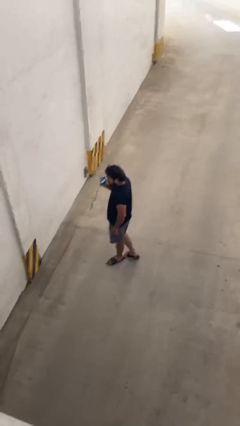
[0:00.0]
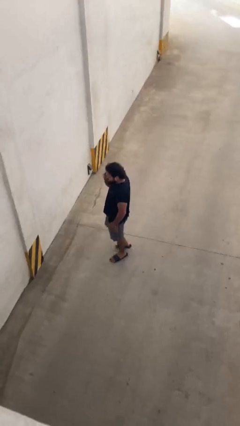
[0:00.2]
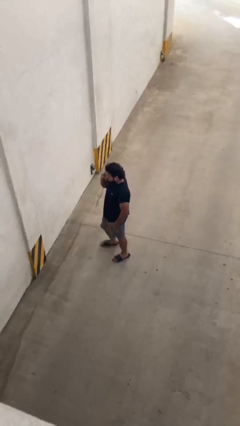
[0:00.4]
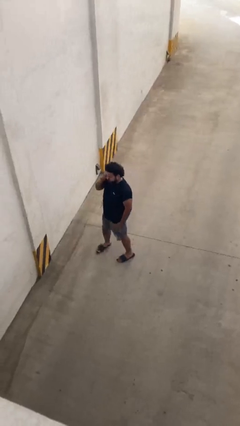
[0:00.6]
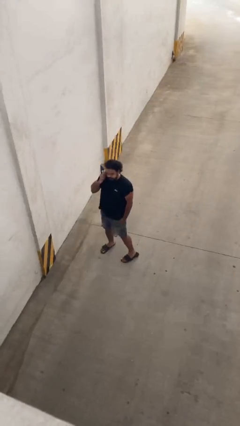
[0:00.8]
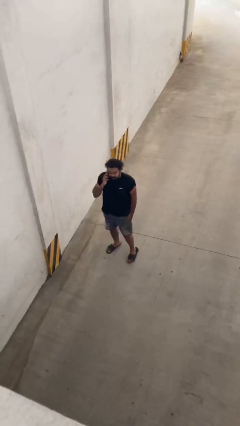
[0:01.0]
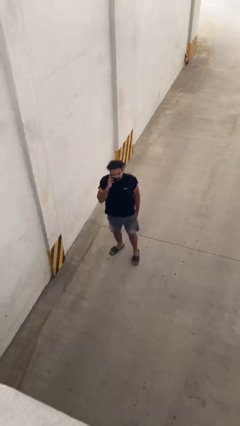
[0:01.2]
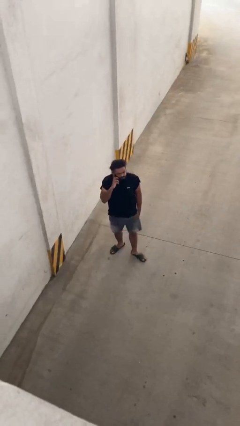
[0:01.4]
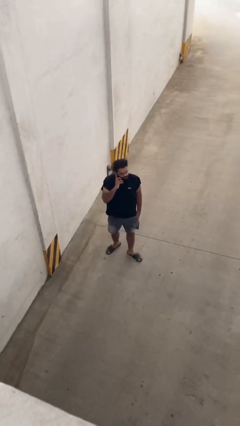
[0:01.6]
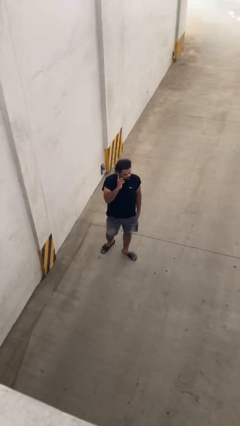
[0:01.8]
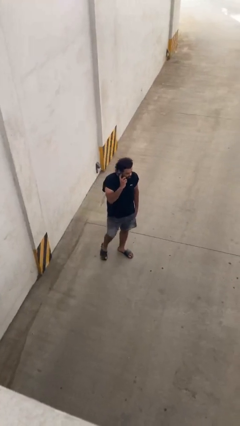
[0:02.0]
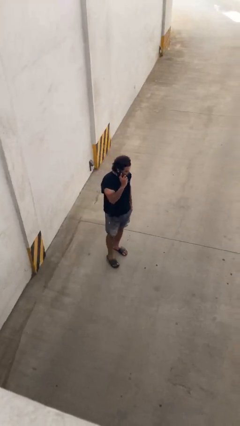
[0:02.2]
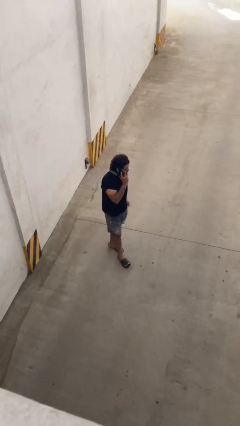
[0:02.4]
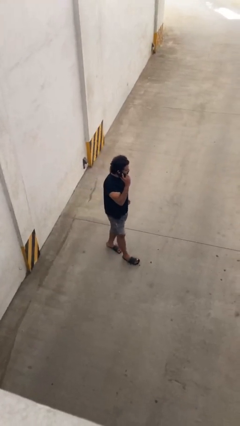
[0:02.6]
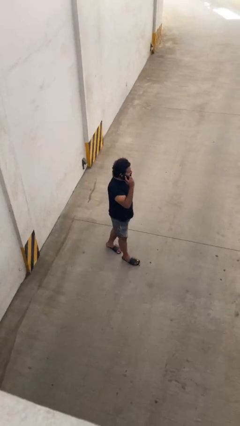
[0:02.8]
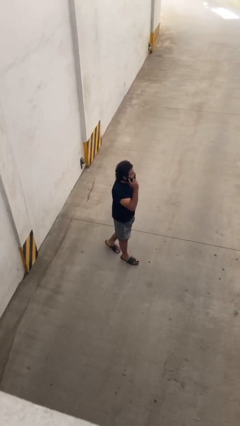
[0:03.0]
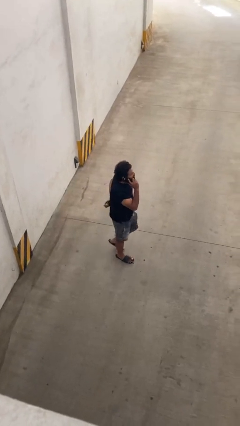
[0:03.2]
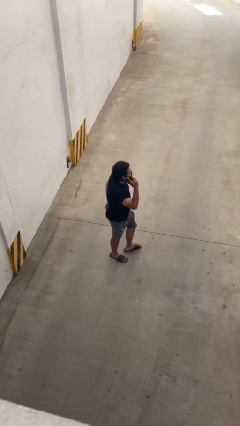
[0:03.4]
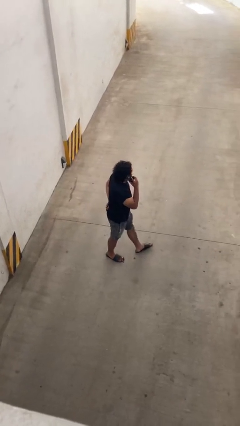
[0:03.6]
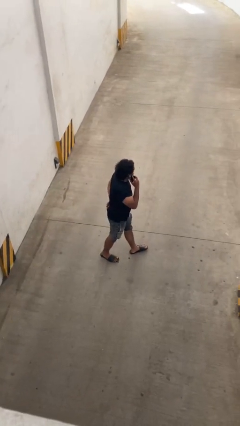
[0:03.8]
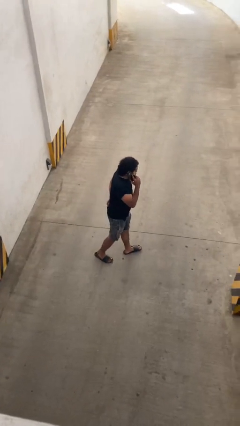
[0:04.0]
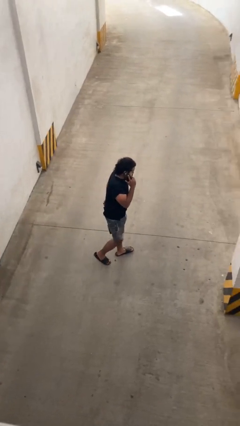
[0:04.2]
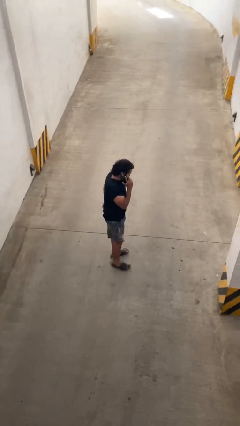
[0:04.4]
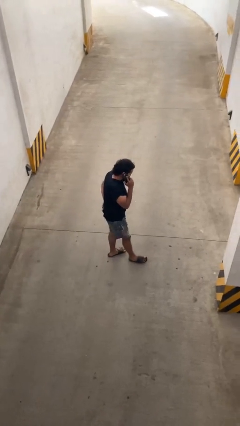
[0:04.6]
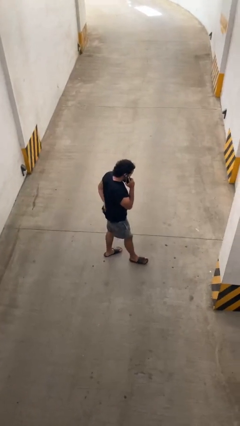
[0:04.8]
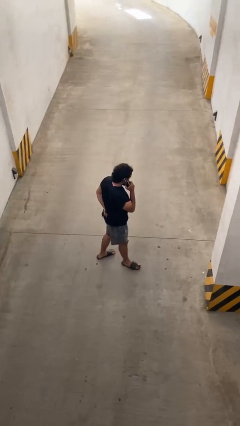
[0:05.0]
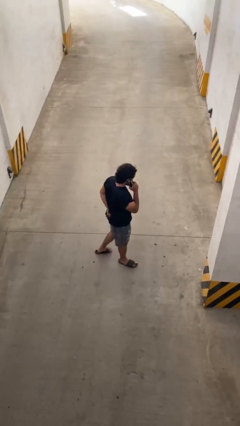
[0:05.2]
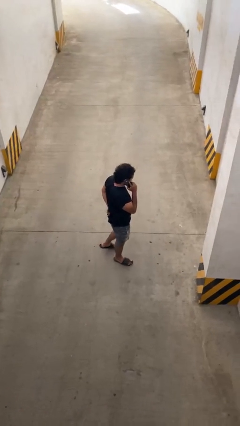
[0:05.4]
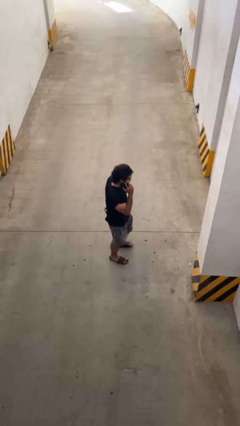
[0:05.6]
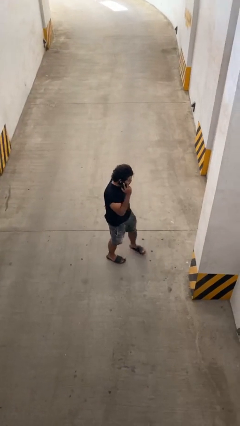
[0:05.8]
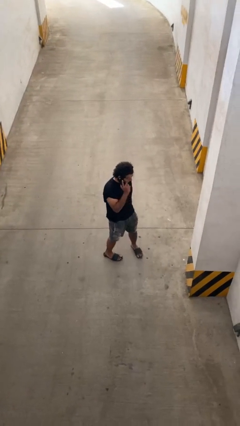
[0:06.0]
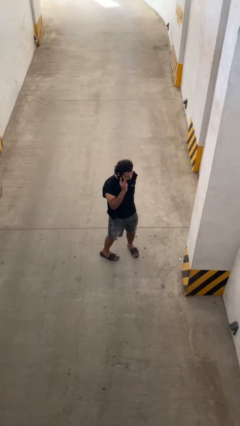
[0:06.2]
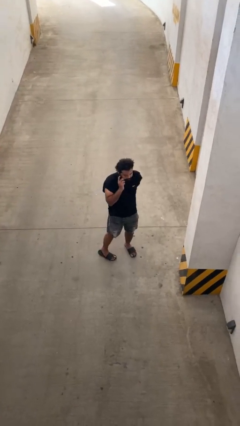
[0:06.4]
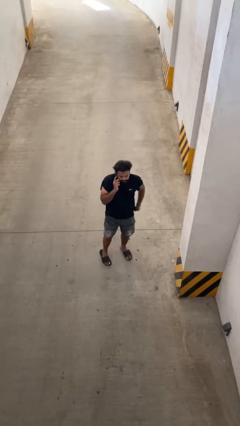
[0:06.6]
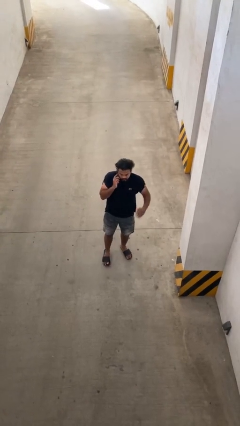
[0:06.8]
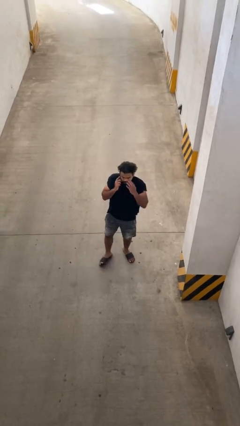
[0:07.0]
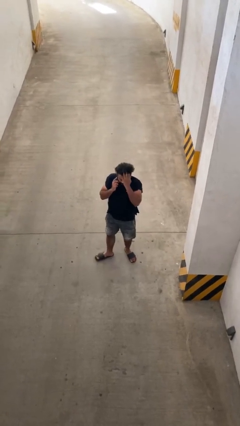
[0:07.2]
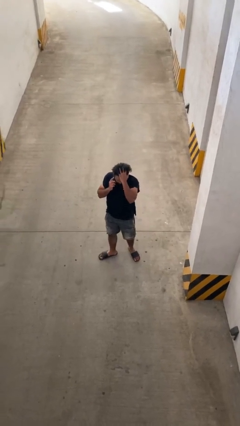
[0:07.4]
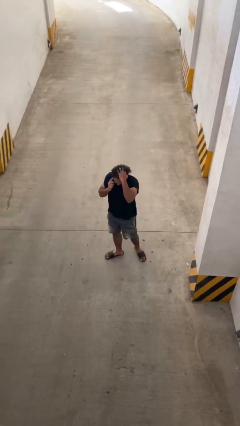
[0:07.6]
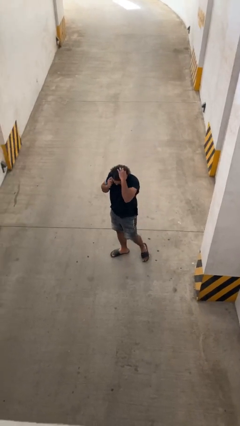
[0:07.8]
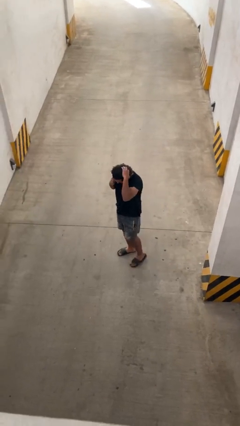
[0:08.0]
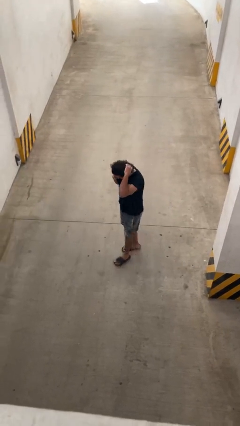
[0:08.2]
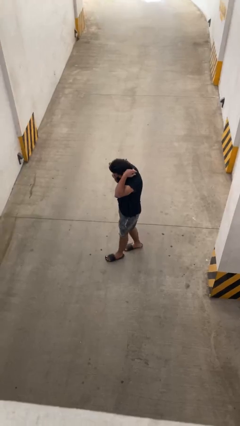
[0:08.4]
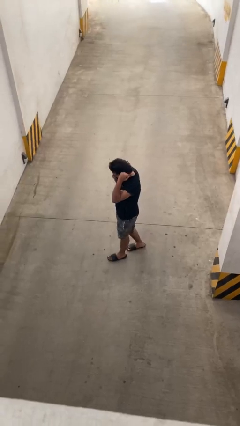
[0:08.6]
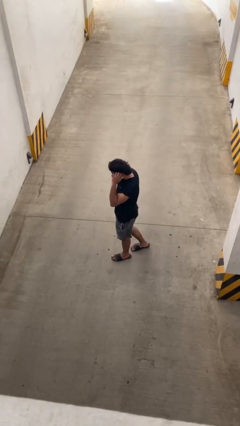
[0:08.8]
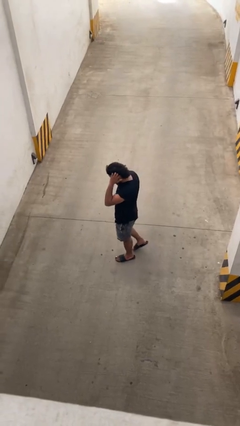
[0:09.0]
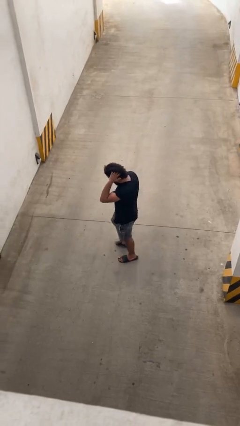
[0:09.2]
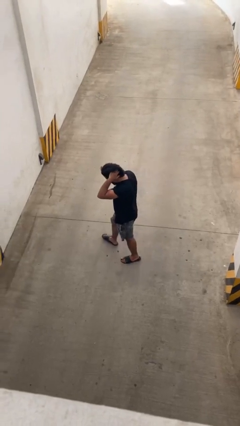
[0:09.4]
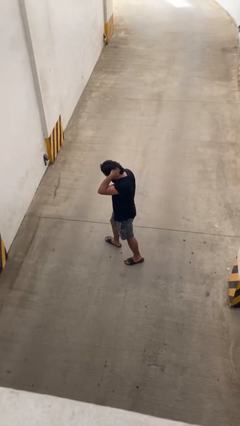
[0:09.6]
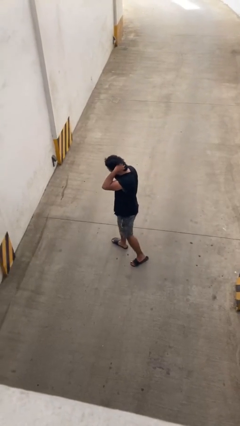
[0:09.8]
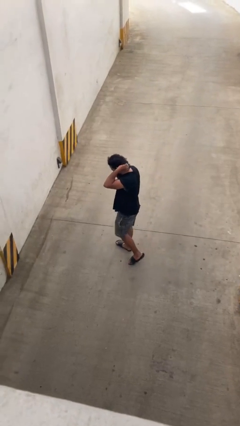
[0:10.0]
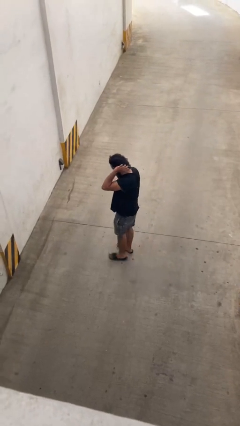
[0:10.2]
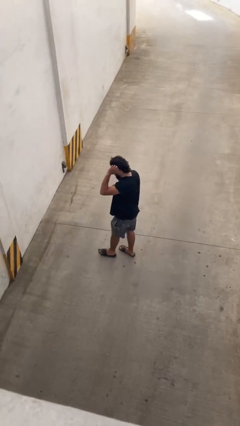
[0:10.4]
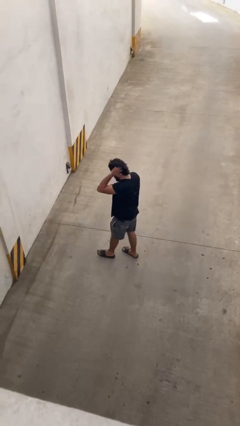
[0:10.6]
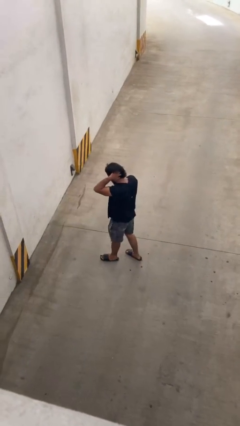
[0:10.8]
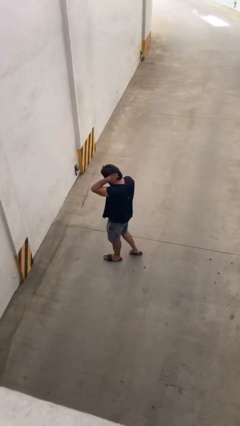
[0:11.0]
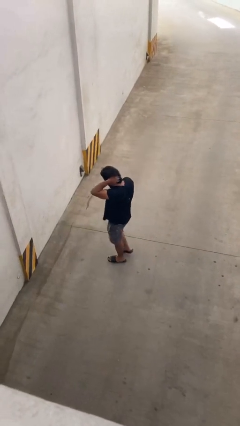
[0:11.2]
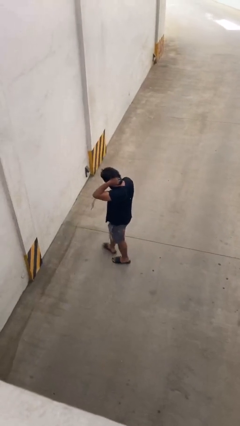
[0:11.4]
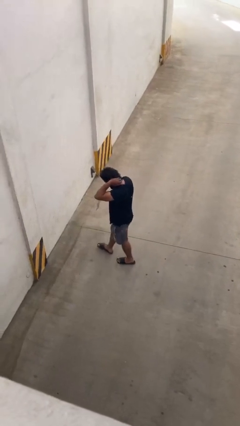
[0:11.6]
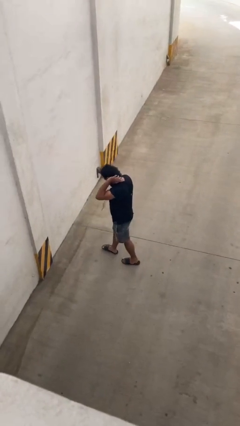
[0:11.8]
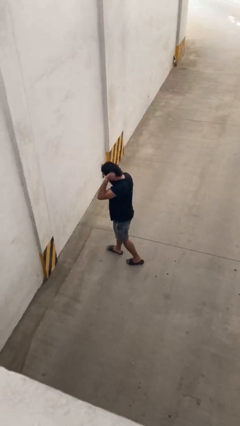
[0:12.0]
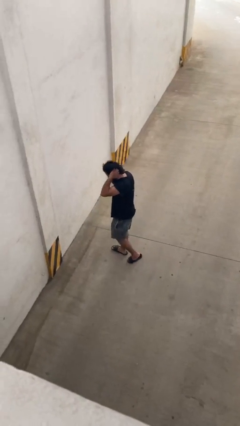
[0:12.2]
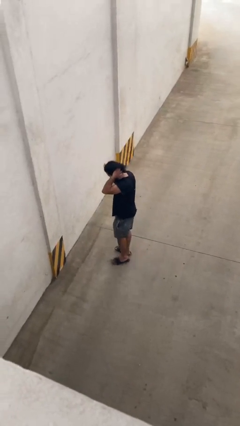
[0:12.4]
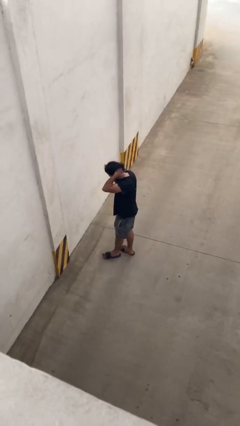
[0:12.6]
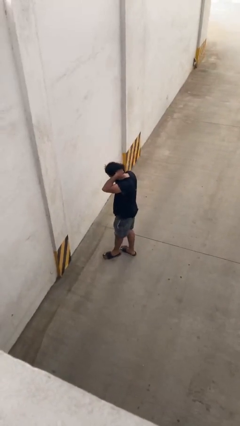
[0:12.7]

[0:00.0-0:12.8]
person talks on phone

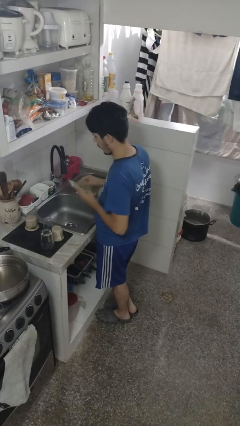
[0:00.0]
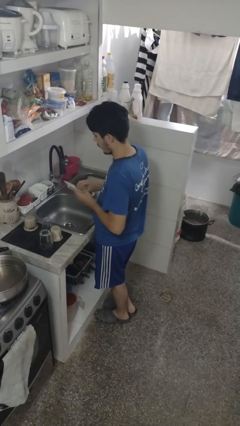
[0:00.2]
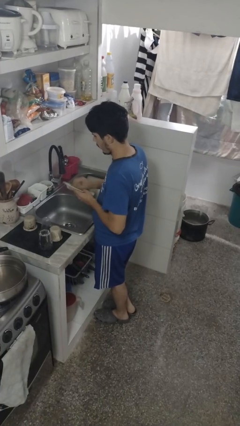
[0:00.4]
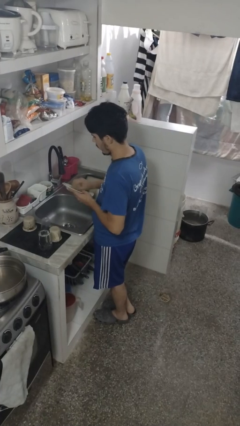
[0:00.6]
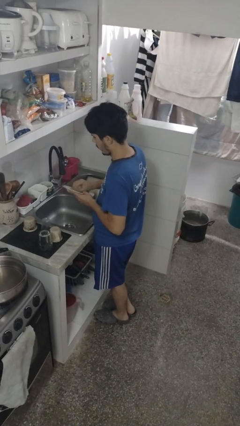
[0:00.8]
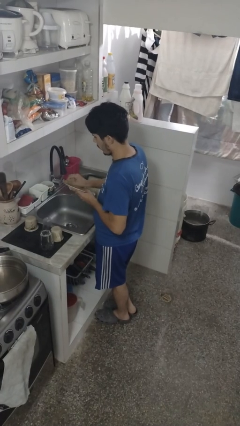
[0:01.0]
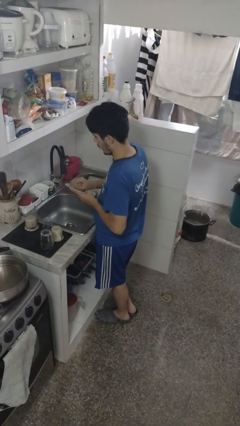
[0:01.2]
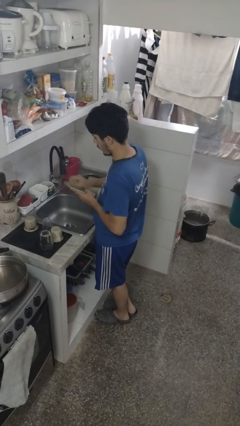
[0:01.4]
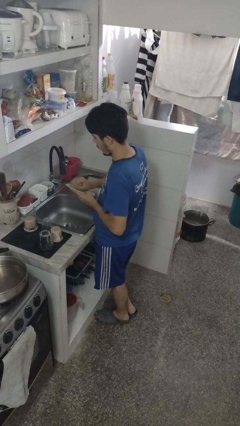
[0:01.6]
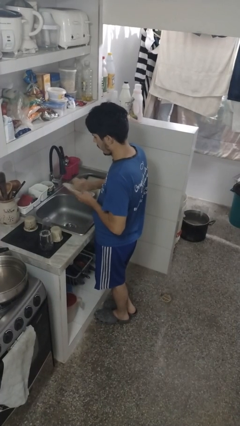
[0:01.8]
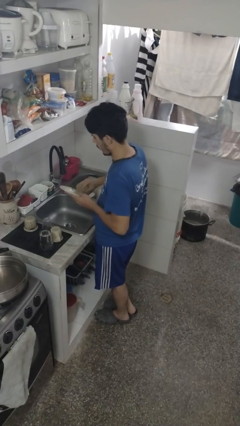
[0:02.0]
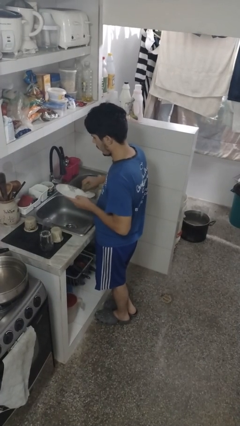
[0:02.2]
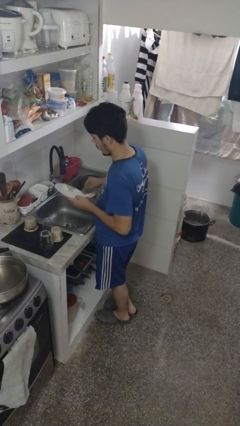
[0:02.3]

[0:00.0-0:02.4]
person dries dish

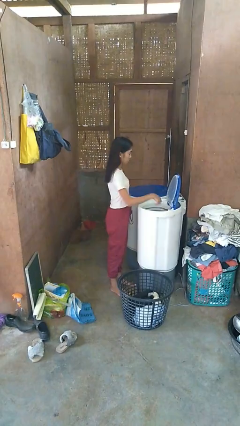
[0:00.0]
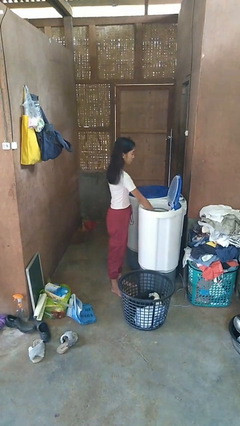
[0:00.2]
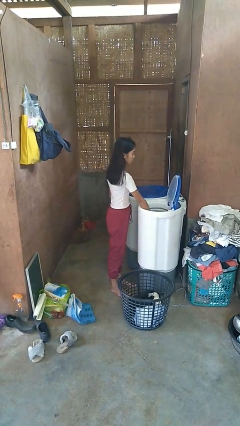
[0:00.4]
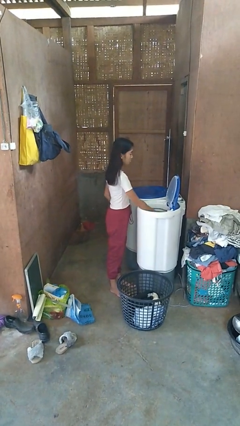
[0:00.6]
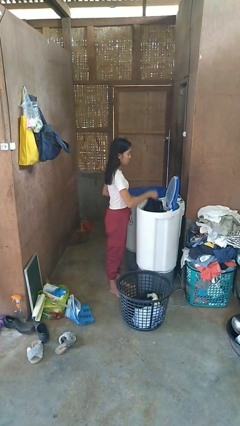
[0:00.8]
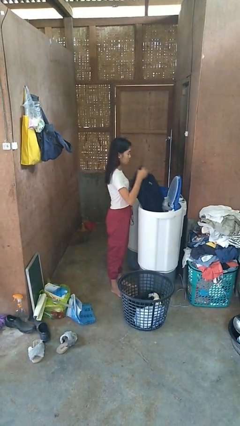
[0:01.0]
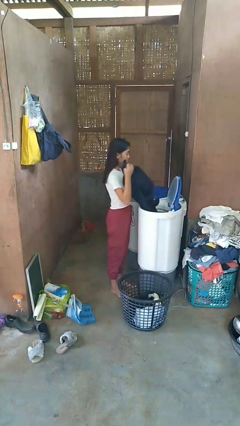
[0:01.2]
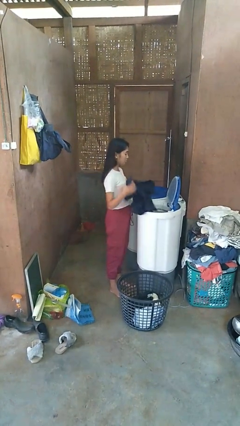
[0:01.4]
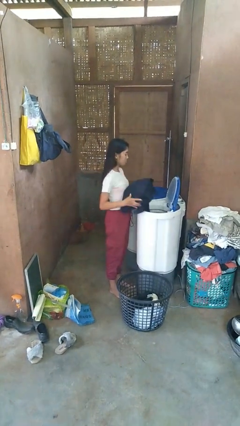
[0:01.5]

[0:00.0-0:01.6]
person unloads dryer

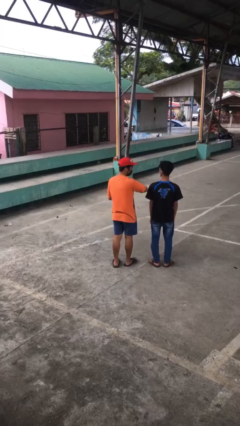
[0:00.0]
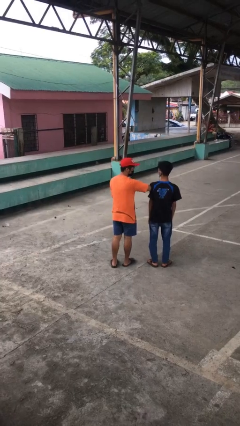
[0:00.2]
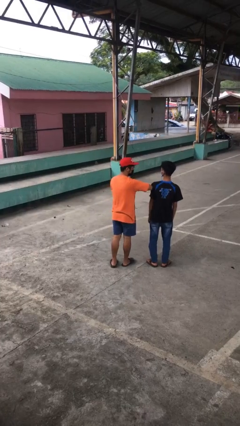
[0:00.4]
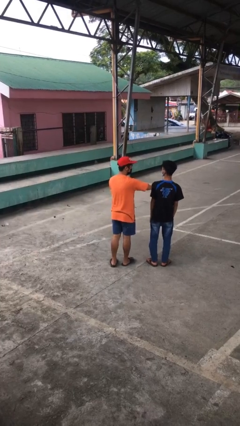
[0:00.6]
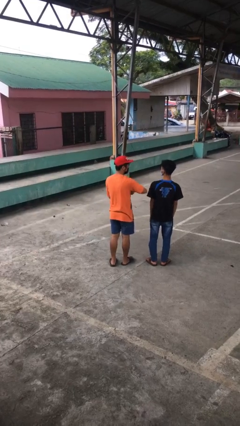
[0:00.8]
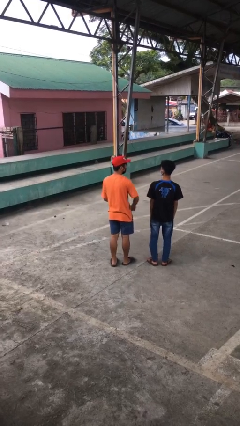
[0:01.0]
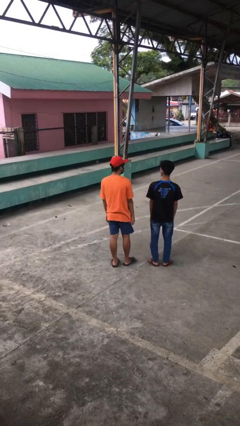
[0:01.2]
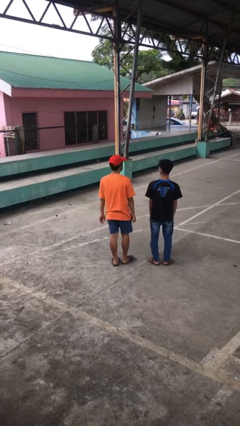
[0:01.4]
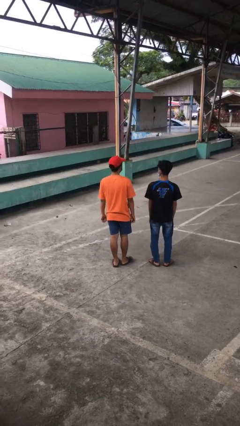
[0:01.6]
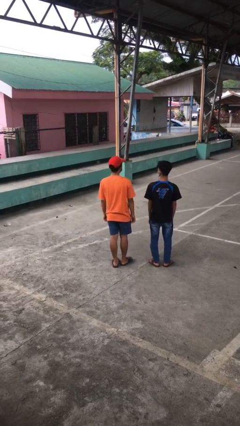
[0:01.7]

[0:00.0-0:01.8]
person nudges person with elbow
